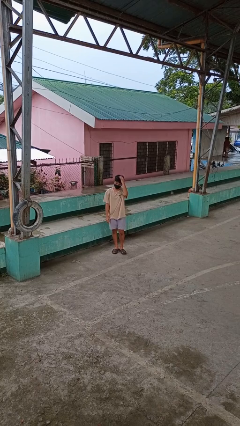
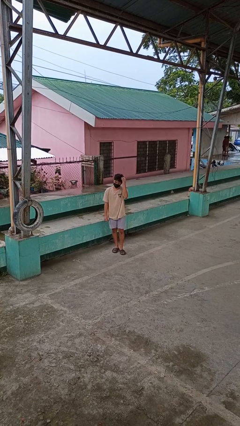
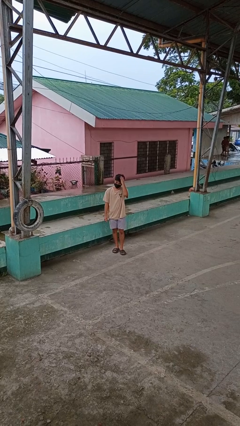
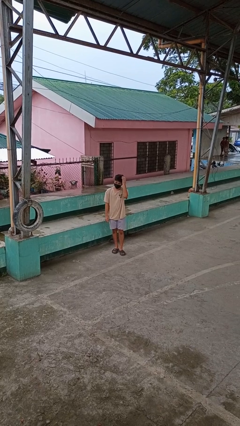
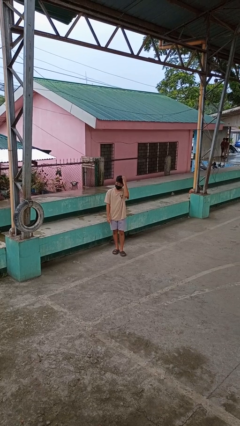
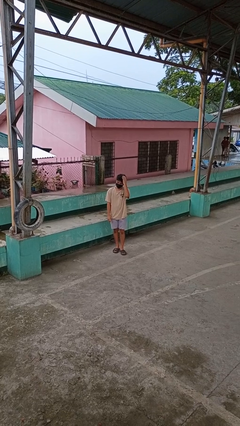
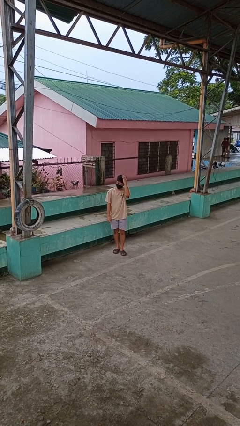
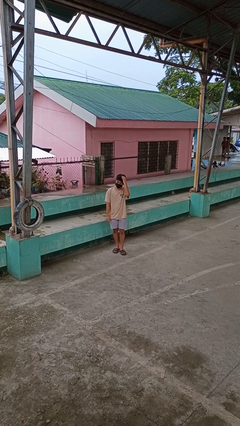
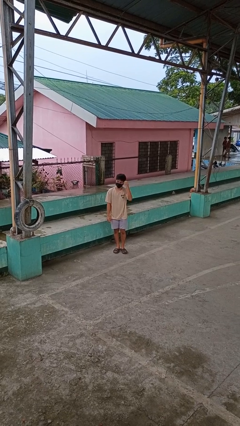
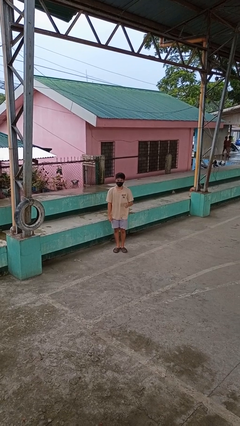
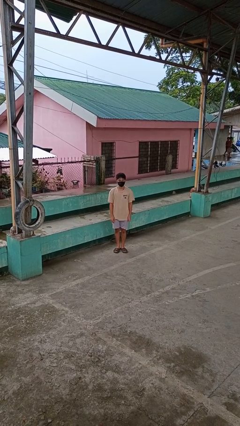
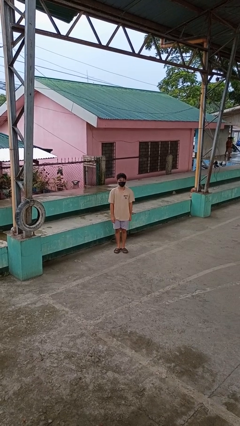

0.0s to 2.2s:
person pats head

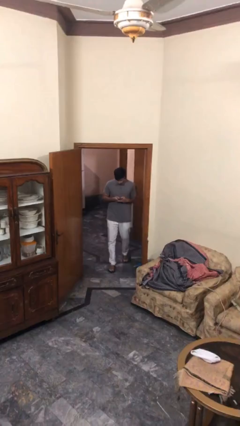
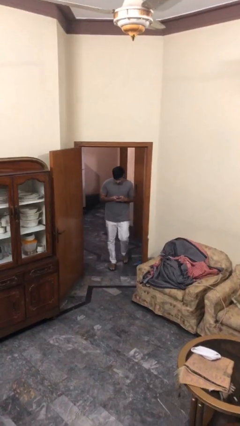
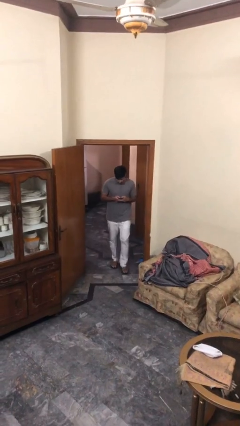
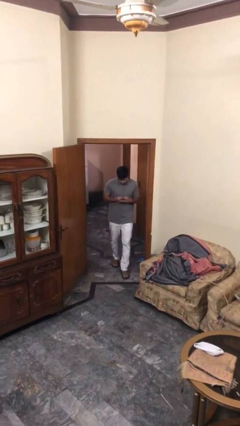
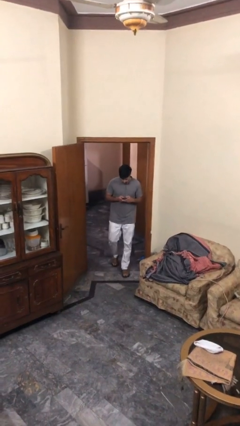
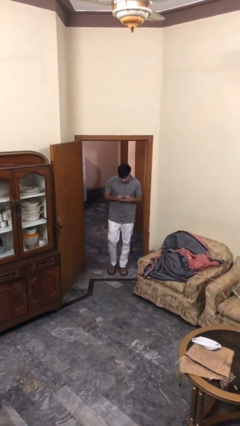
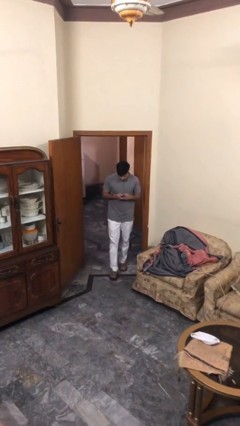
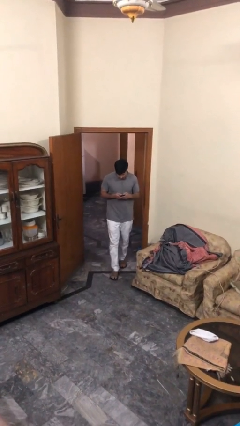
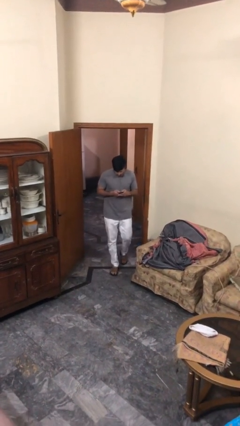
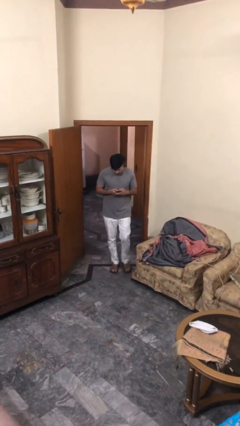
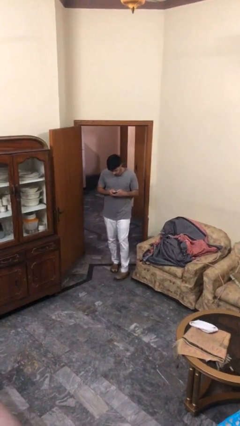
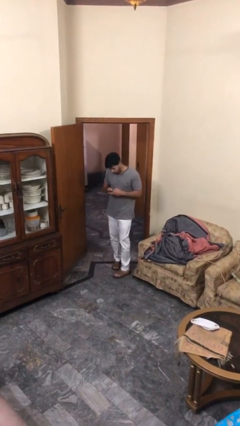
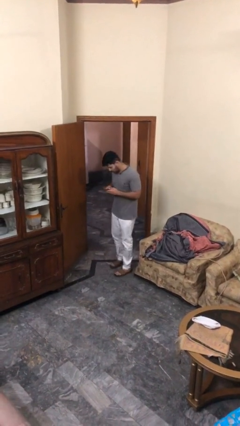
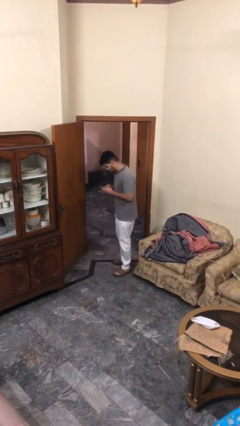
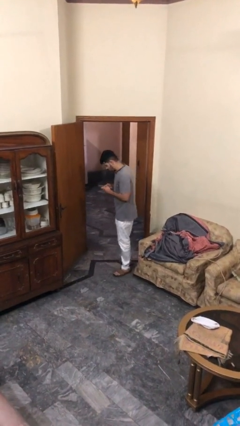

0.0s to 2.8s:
person enters scene through structure

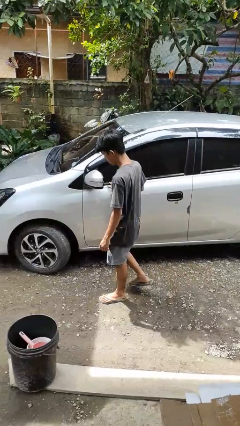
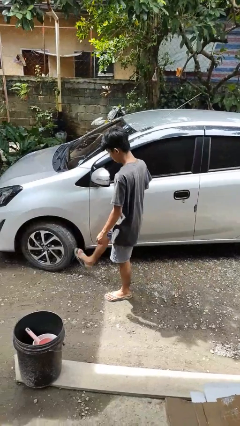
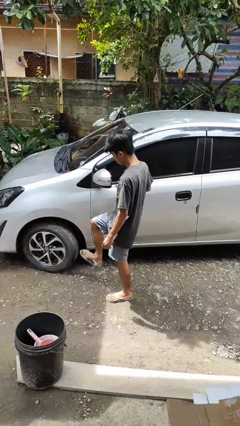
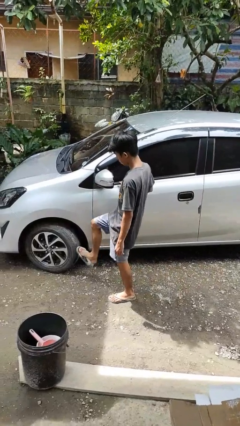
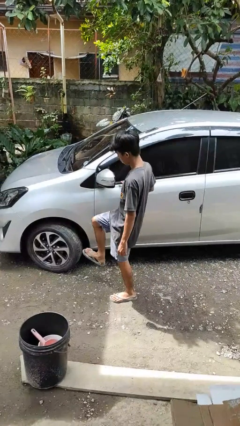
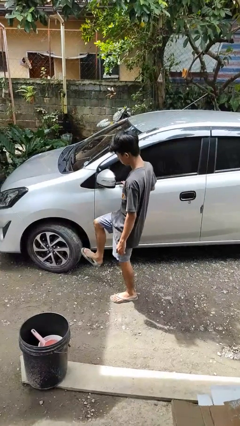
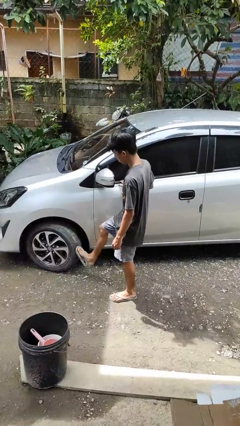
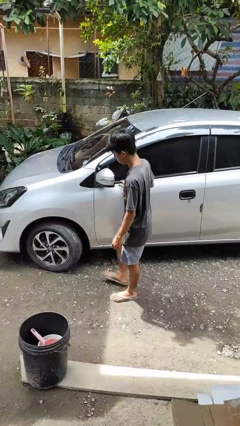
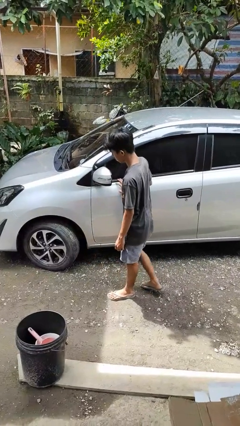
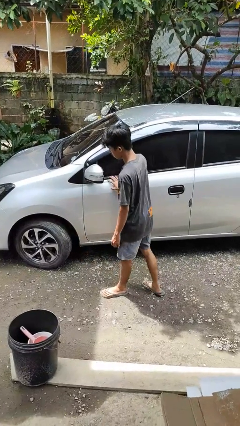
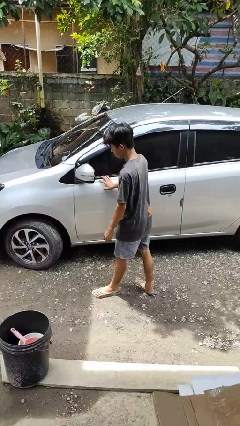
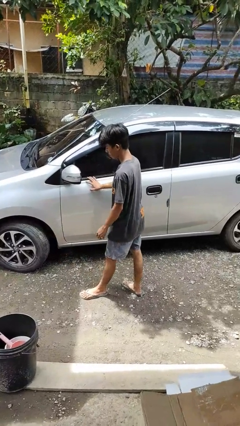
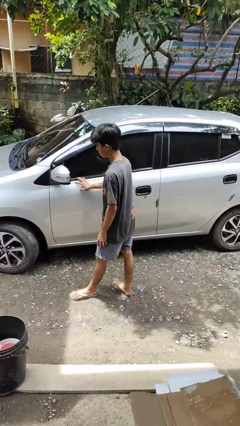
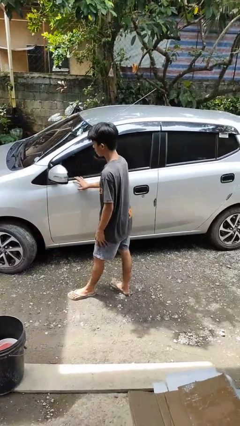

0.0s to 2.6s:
person kicks car tires

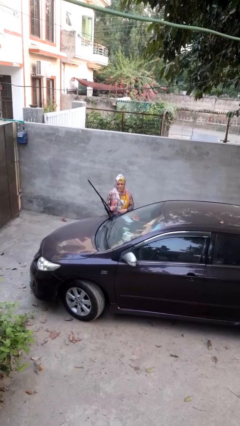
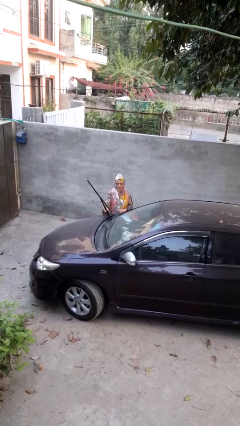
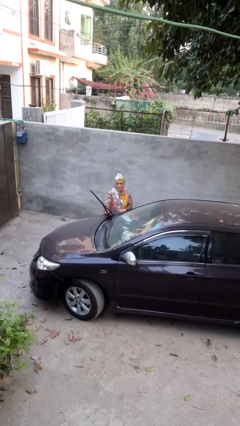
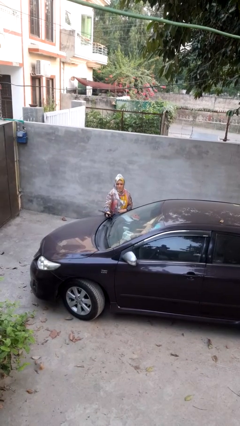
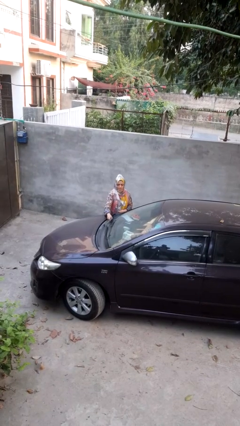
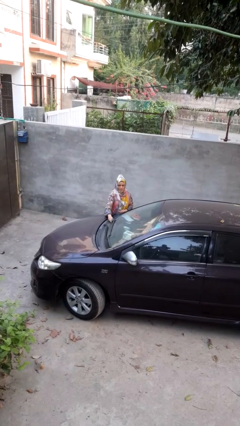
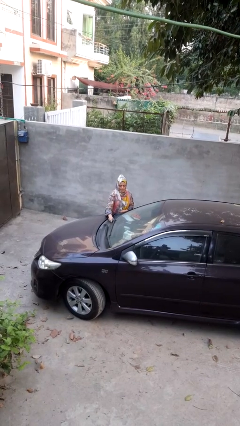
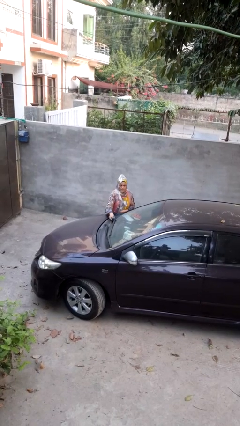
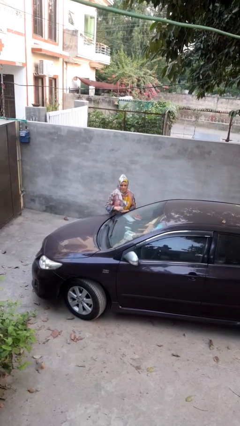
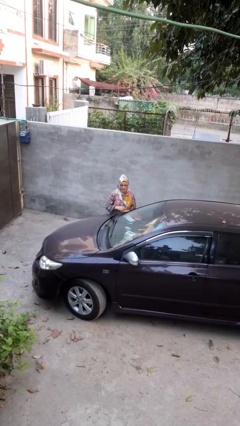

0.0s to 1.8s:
person flips down car wipers

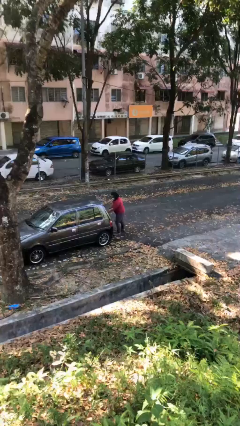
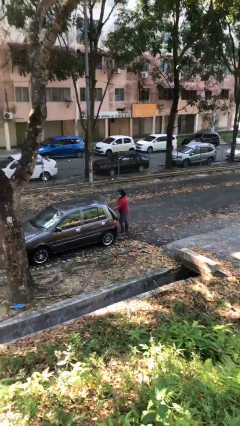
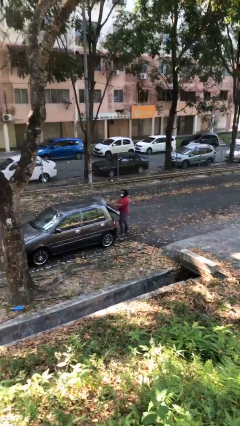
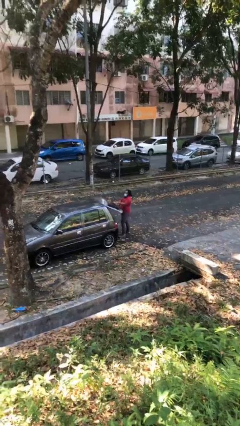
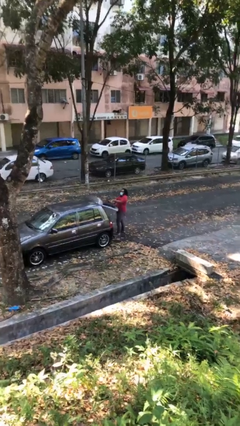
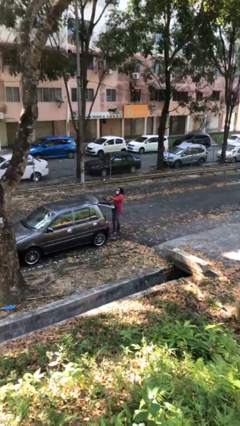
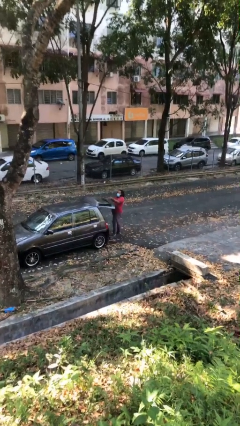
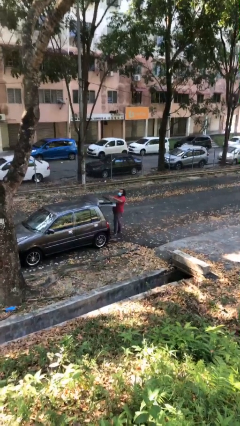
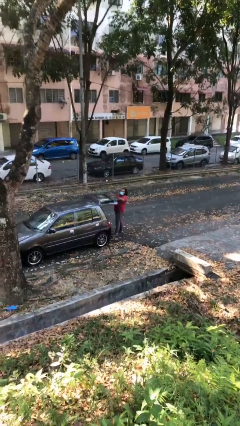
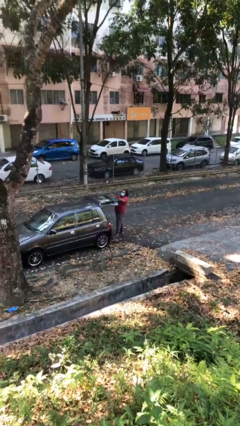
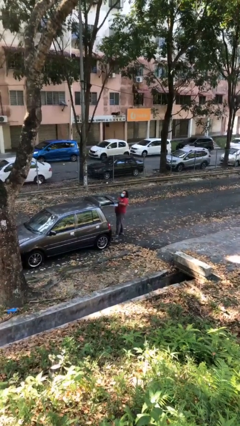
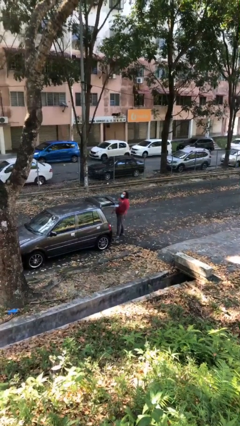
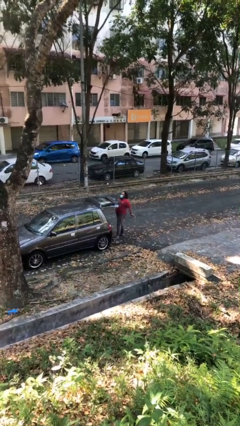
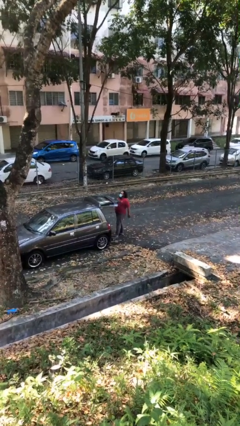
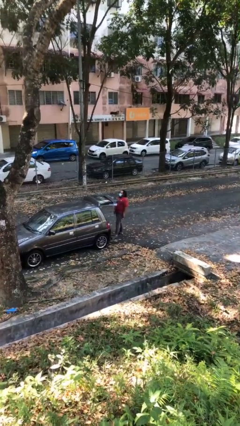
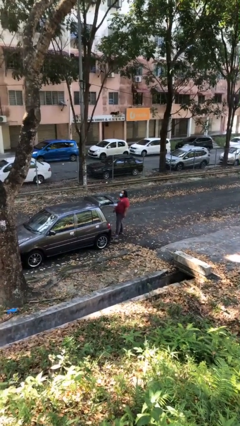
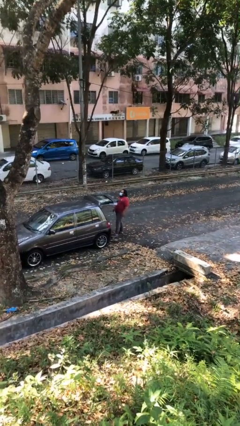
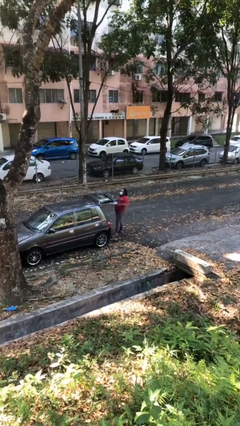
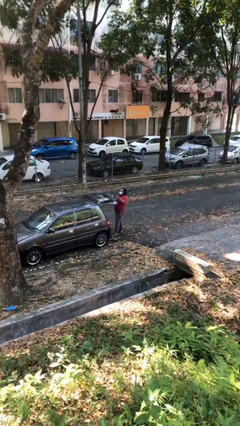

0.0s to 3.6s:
person opens car trunk

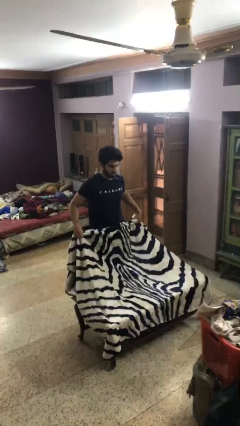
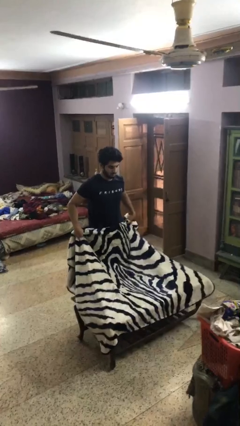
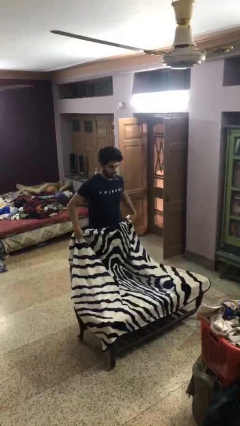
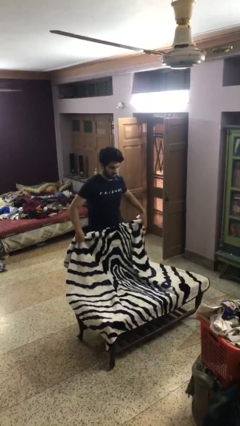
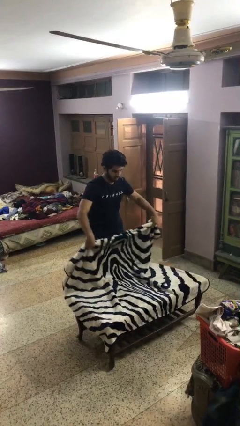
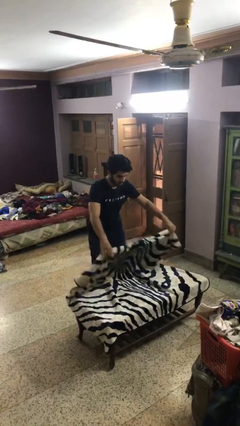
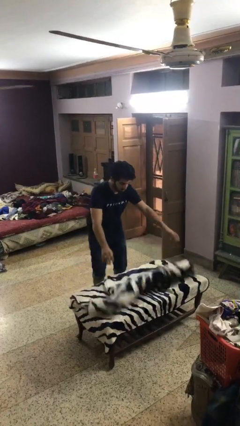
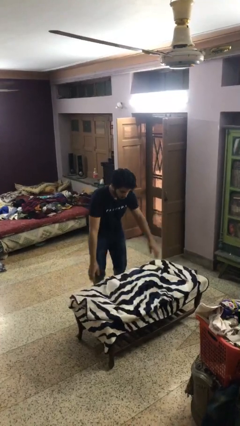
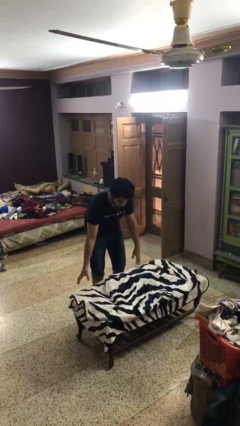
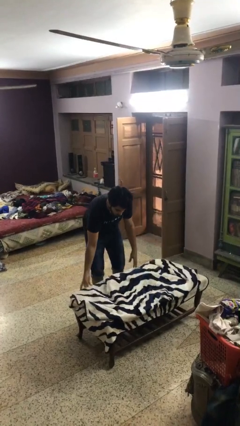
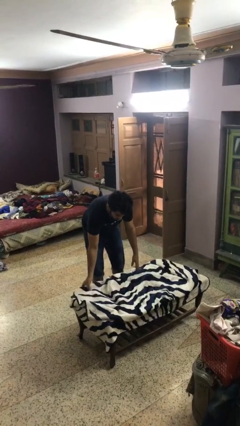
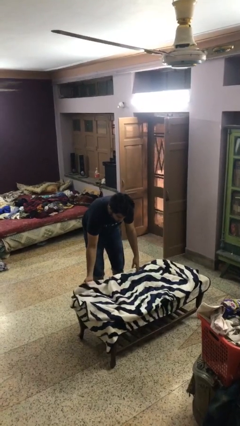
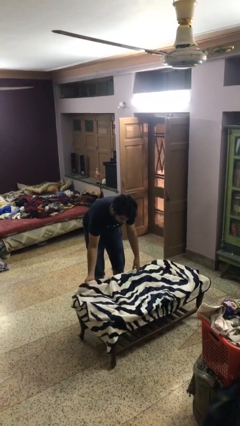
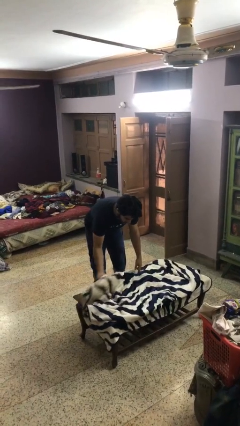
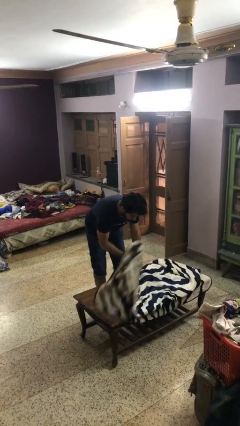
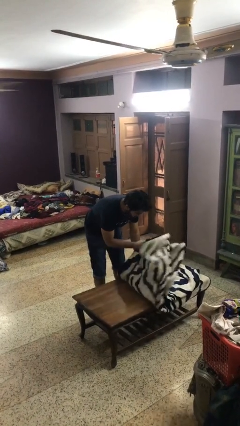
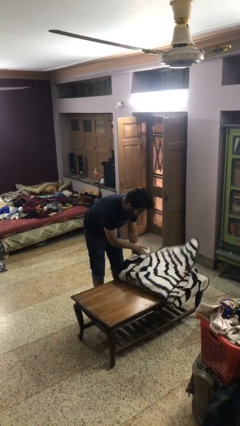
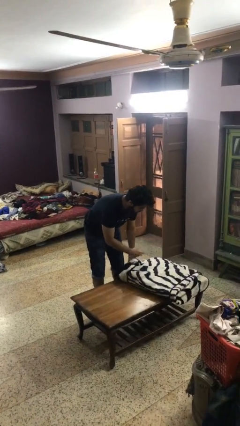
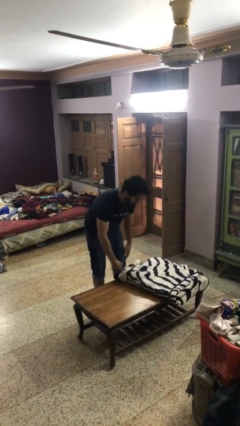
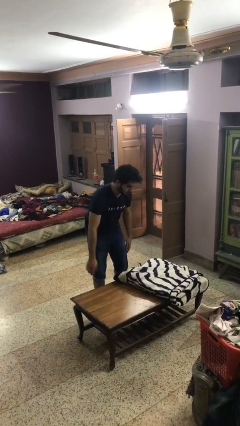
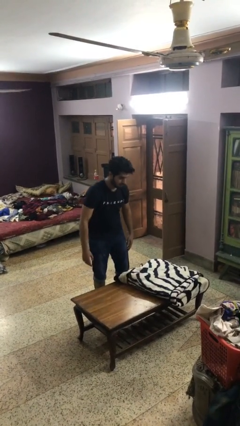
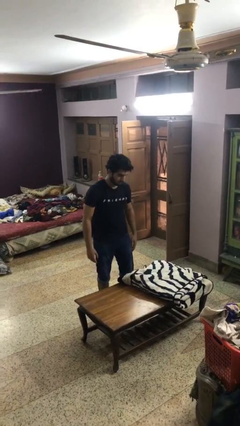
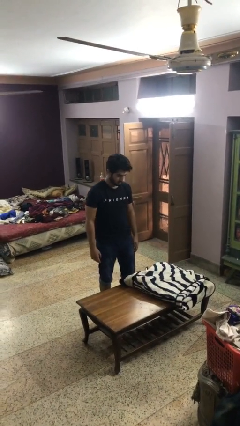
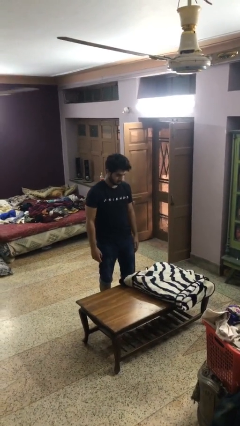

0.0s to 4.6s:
person folds blanket
